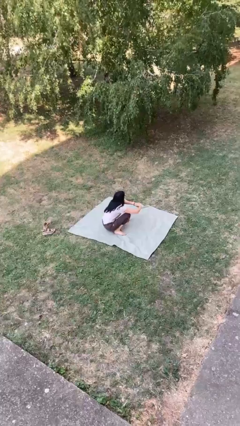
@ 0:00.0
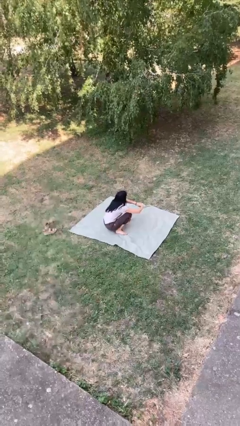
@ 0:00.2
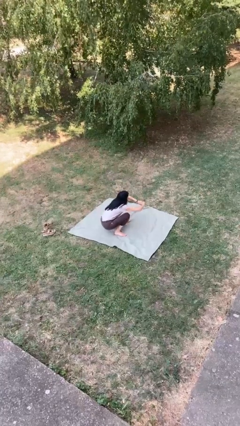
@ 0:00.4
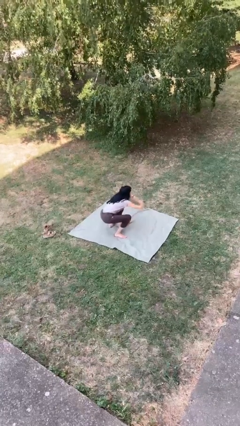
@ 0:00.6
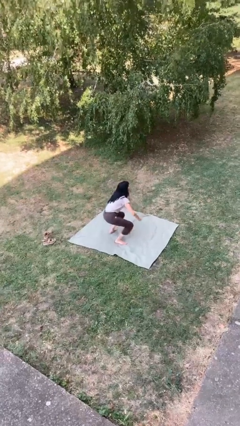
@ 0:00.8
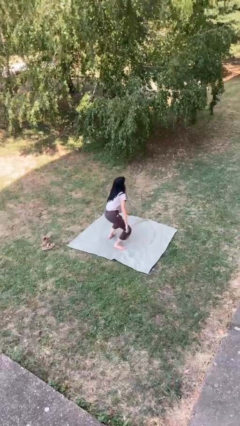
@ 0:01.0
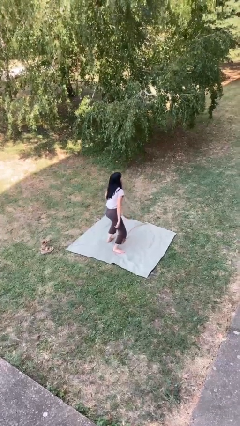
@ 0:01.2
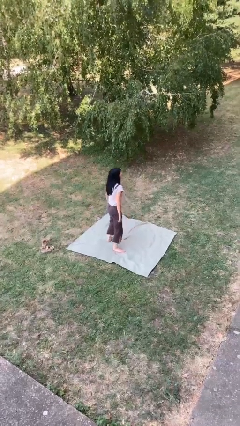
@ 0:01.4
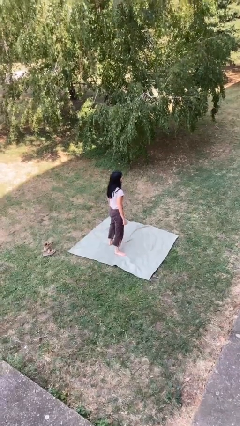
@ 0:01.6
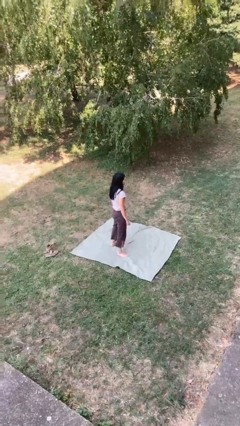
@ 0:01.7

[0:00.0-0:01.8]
person stands up

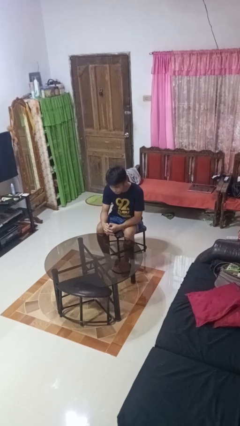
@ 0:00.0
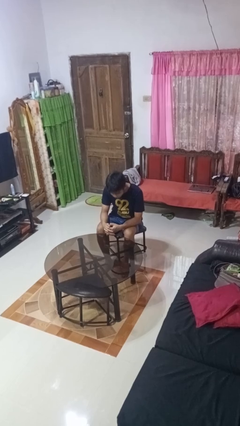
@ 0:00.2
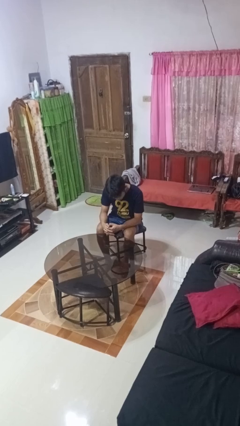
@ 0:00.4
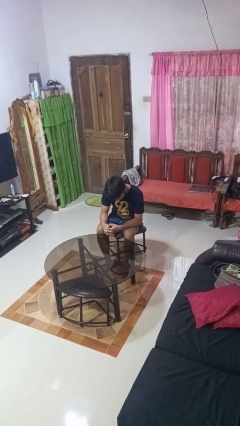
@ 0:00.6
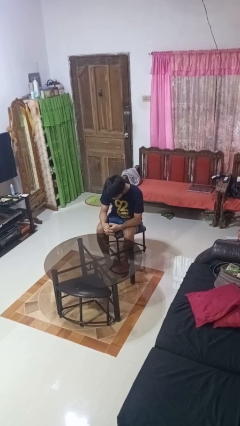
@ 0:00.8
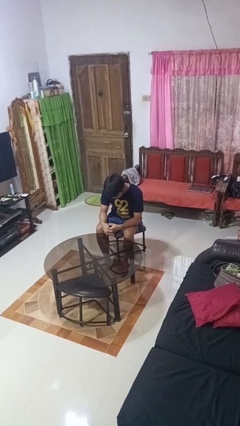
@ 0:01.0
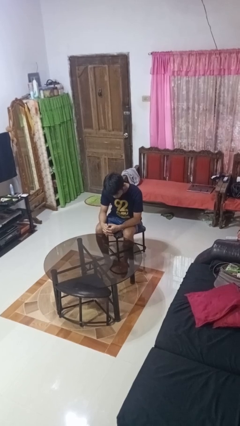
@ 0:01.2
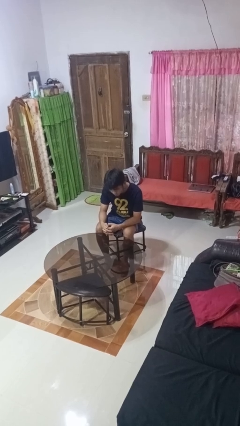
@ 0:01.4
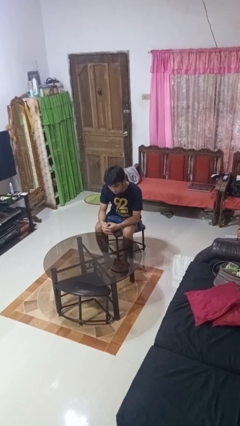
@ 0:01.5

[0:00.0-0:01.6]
person shakes head

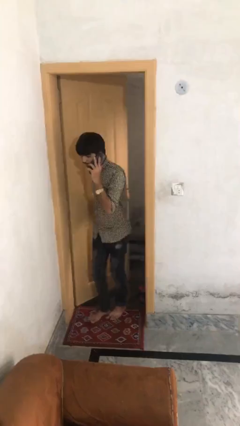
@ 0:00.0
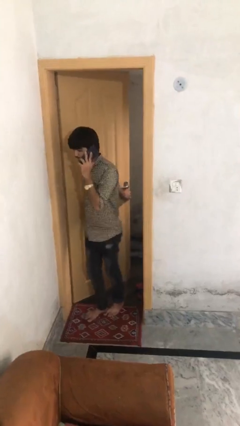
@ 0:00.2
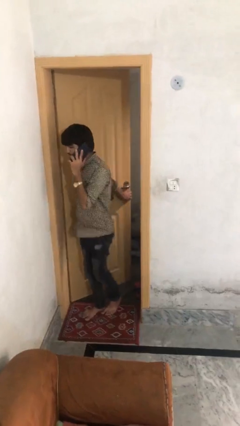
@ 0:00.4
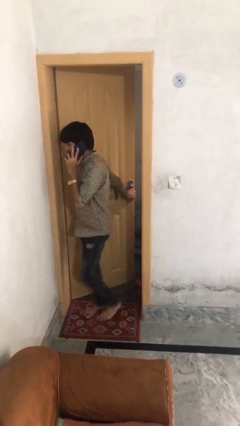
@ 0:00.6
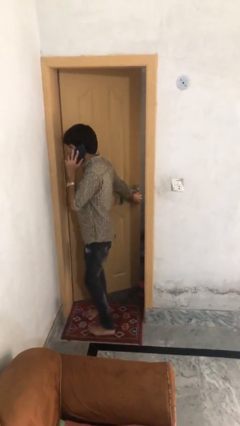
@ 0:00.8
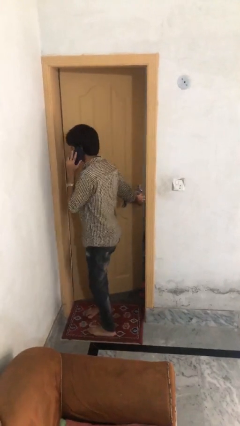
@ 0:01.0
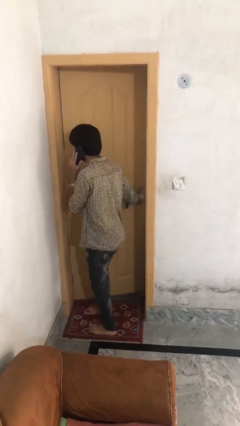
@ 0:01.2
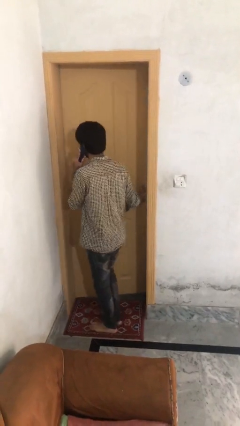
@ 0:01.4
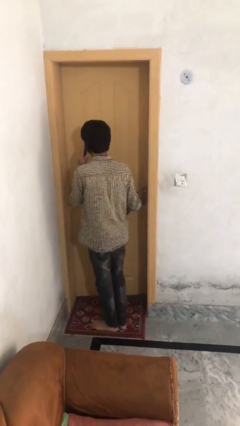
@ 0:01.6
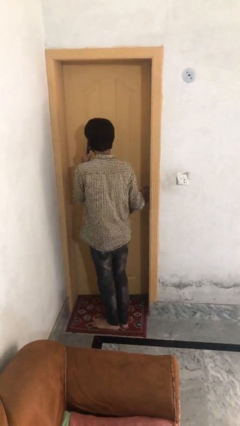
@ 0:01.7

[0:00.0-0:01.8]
person enters scene through structure

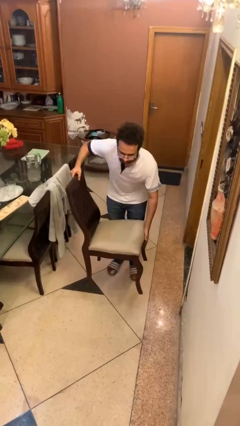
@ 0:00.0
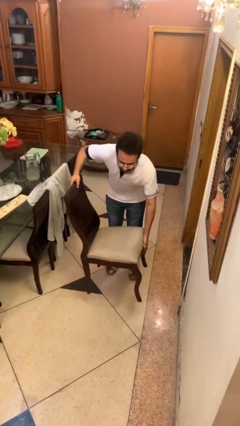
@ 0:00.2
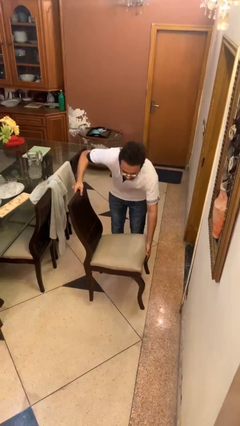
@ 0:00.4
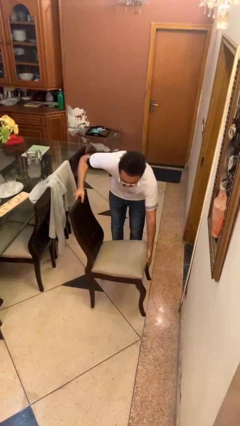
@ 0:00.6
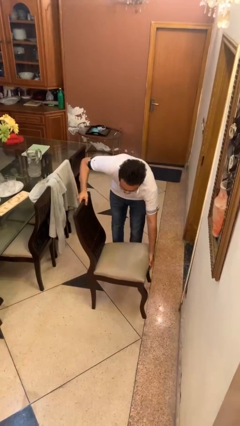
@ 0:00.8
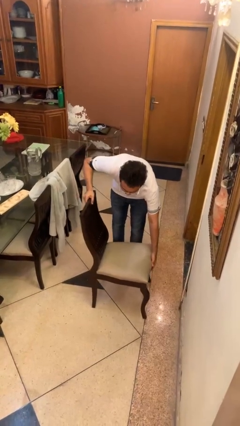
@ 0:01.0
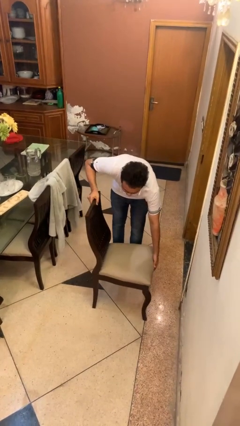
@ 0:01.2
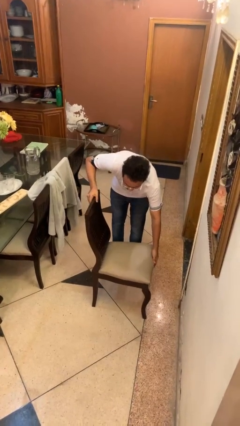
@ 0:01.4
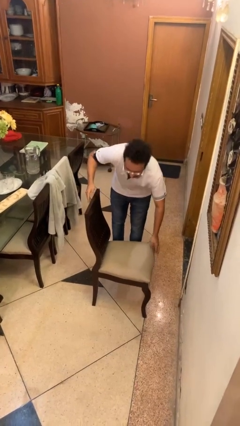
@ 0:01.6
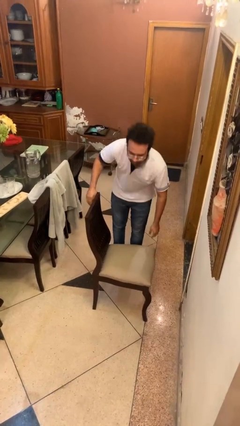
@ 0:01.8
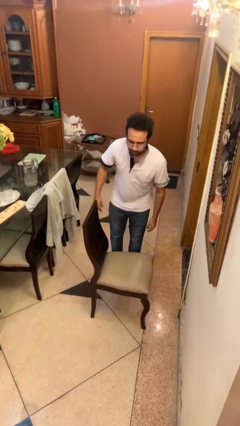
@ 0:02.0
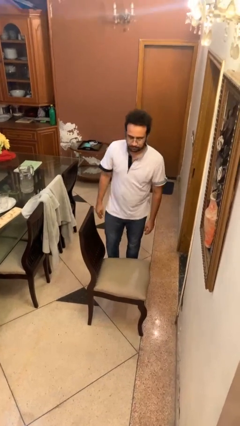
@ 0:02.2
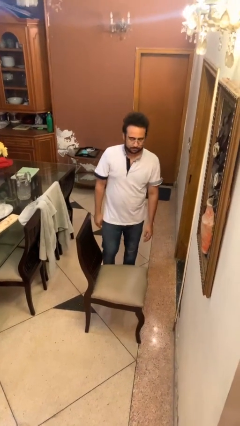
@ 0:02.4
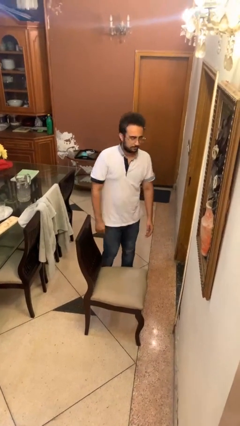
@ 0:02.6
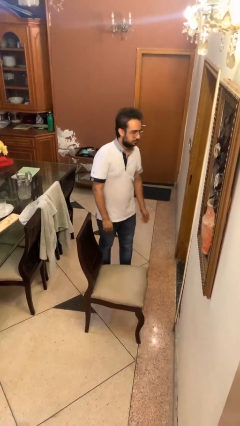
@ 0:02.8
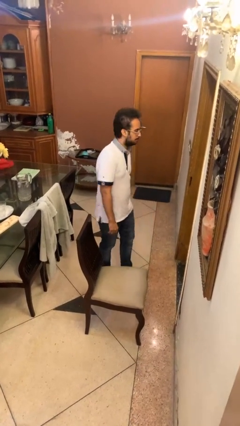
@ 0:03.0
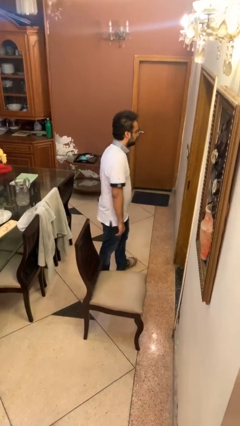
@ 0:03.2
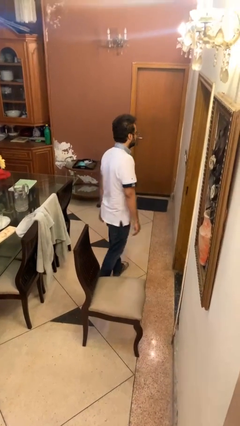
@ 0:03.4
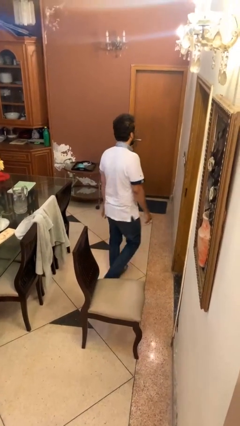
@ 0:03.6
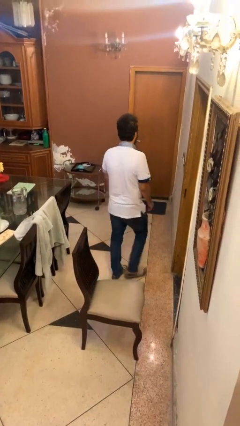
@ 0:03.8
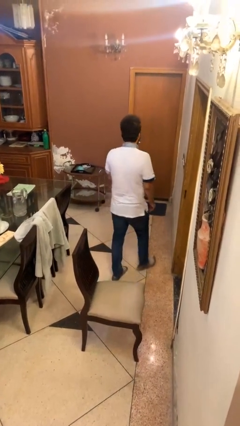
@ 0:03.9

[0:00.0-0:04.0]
person puts down object on floor

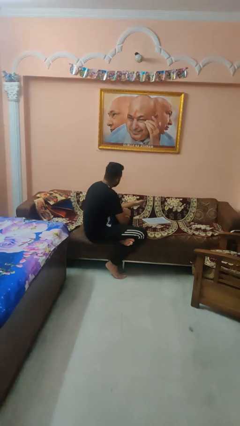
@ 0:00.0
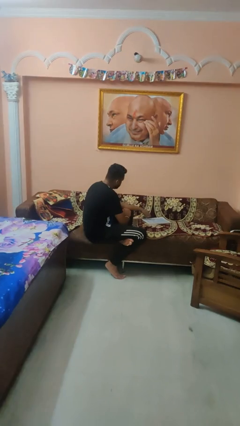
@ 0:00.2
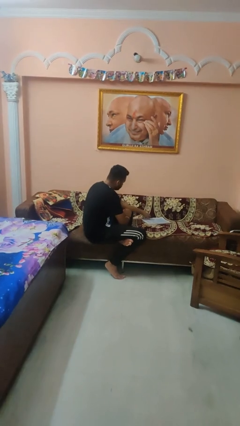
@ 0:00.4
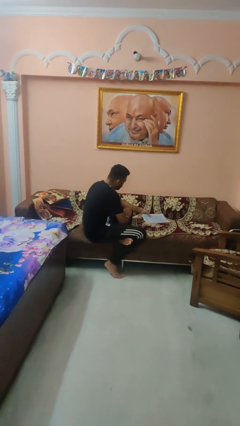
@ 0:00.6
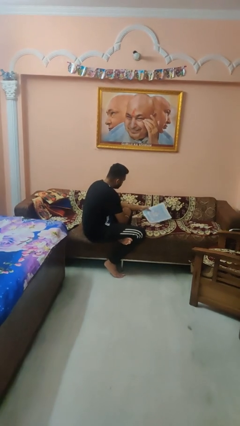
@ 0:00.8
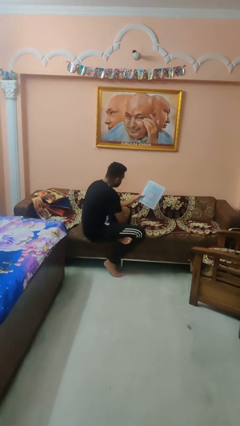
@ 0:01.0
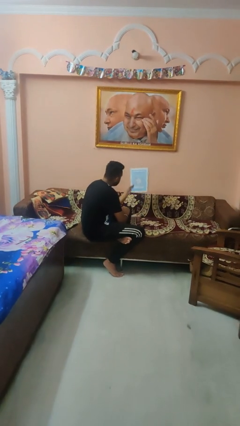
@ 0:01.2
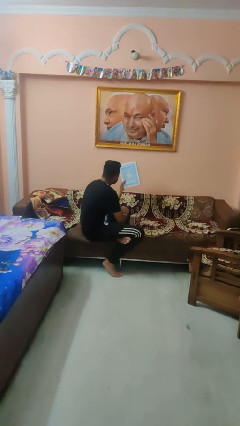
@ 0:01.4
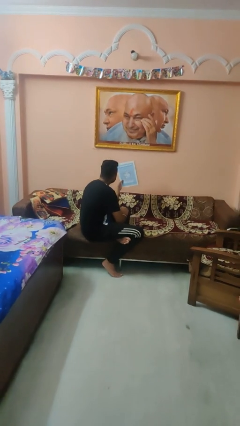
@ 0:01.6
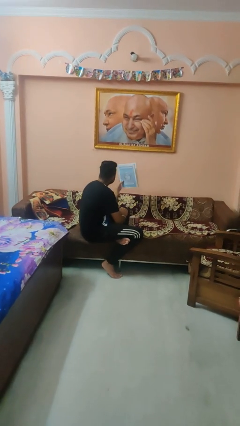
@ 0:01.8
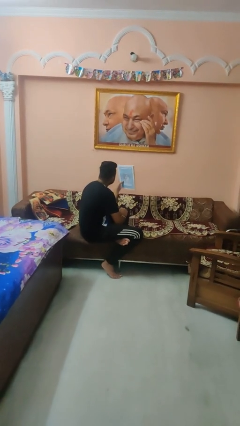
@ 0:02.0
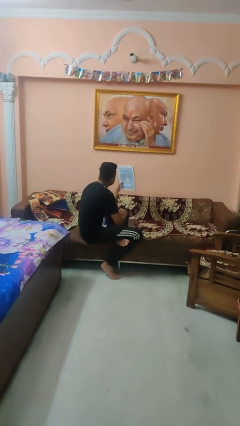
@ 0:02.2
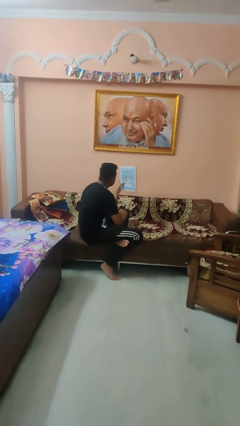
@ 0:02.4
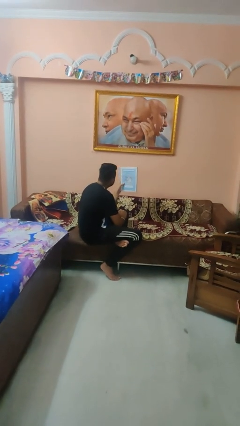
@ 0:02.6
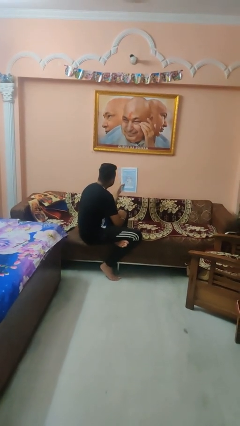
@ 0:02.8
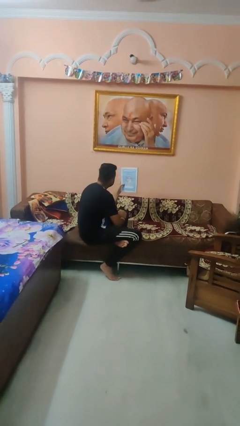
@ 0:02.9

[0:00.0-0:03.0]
person picks up object from couch

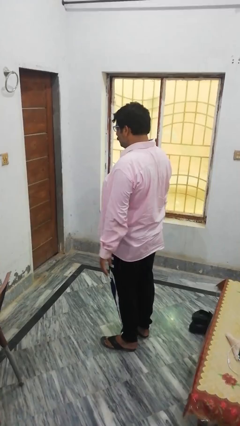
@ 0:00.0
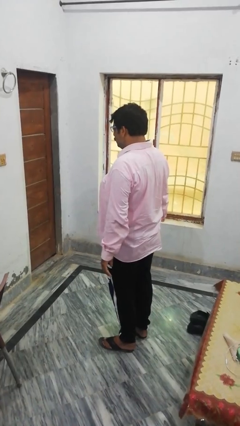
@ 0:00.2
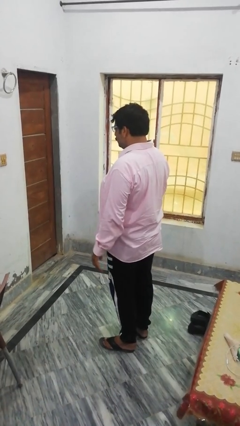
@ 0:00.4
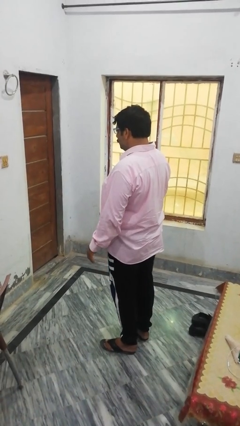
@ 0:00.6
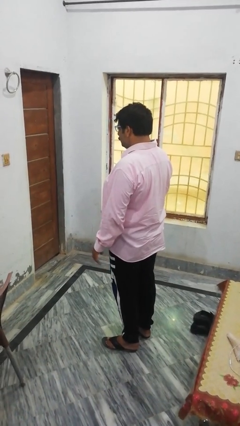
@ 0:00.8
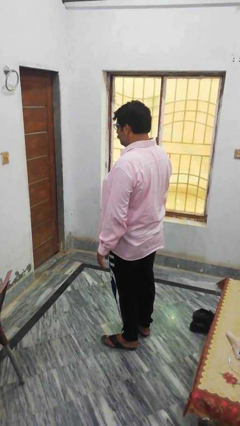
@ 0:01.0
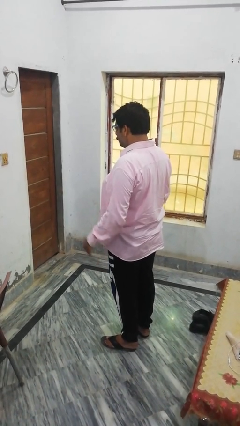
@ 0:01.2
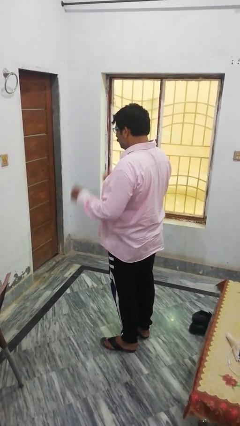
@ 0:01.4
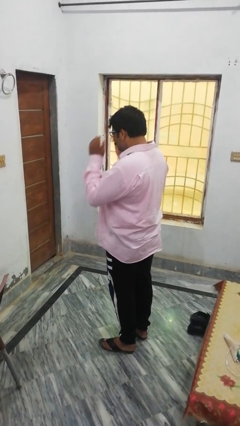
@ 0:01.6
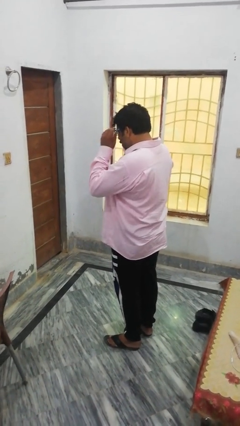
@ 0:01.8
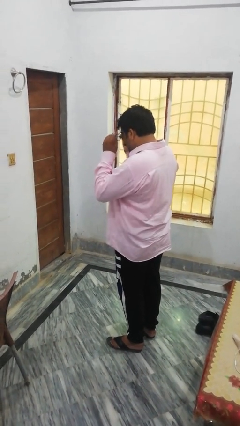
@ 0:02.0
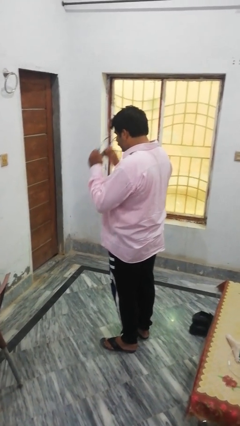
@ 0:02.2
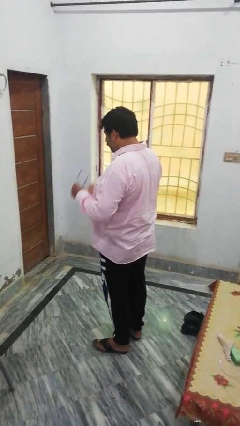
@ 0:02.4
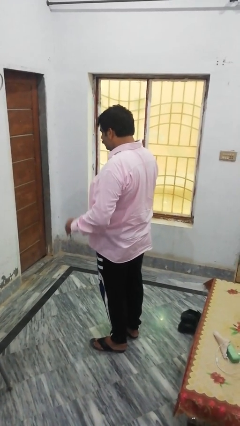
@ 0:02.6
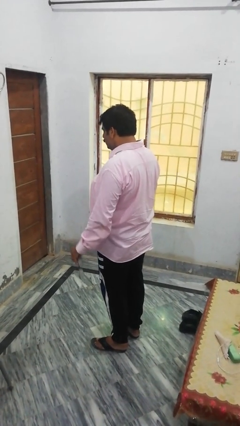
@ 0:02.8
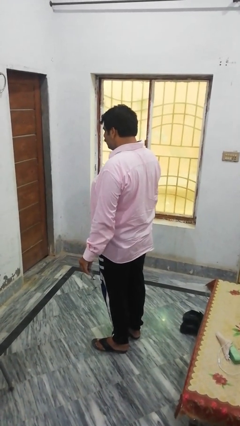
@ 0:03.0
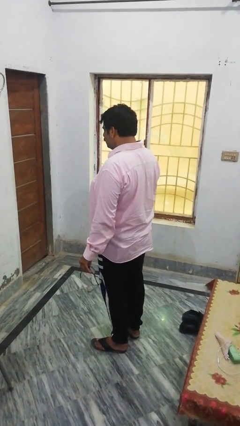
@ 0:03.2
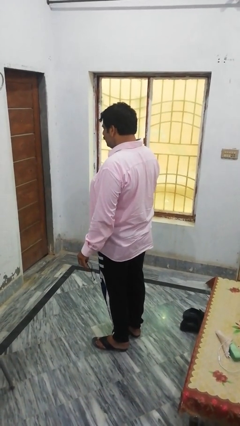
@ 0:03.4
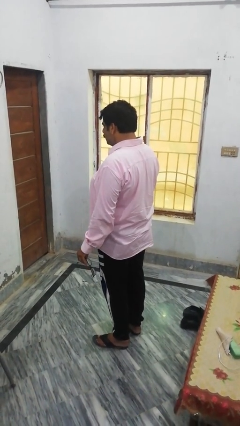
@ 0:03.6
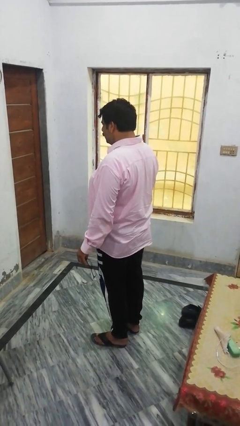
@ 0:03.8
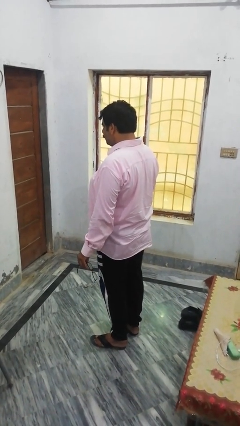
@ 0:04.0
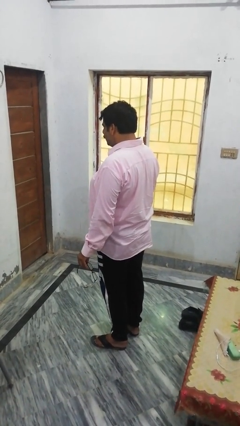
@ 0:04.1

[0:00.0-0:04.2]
person takes off glasses

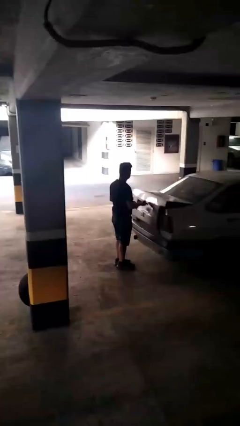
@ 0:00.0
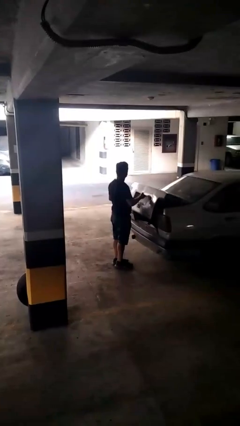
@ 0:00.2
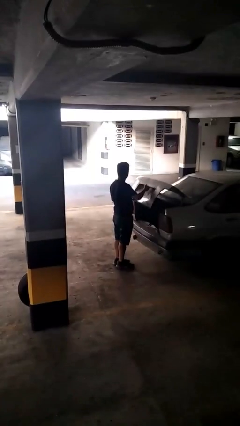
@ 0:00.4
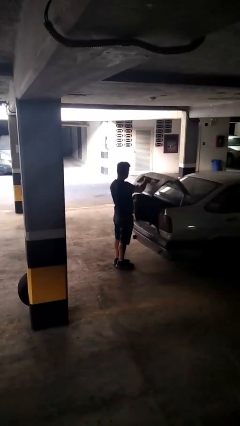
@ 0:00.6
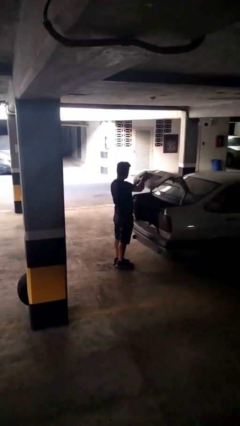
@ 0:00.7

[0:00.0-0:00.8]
person opens car trunk
